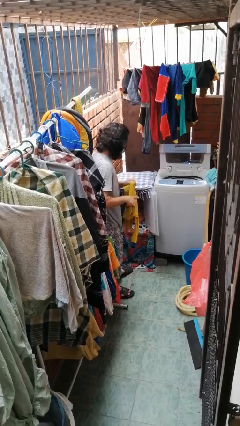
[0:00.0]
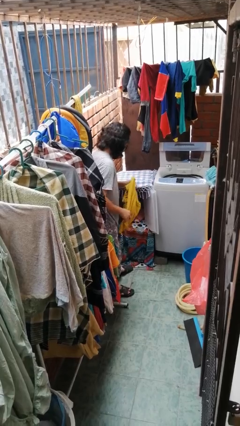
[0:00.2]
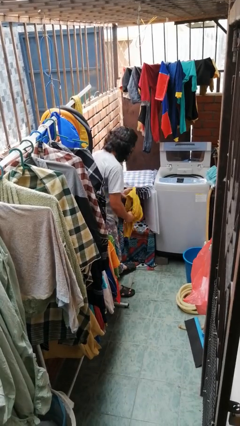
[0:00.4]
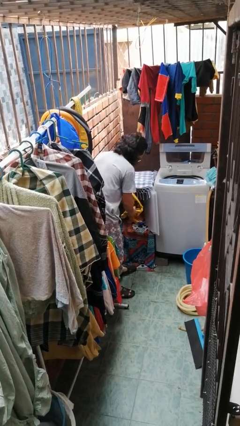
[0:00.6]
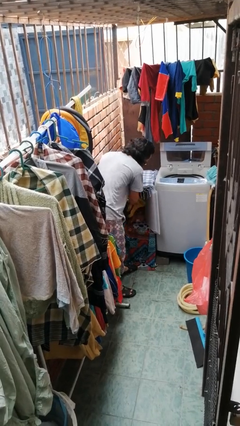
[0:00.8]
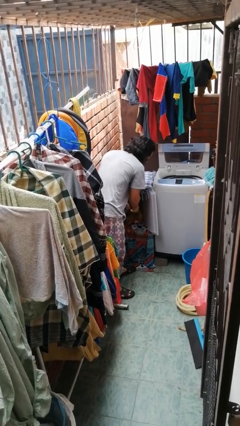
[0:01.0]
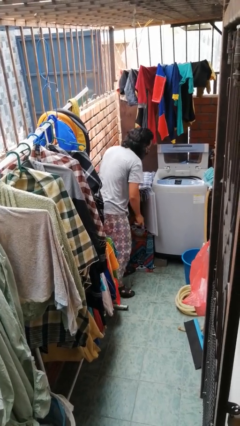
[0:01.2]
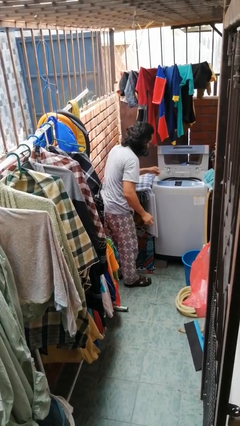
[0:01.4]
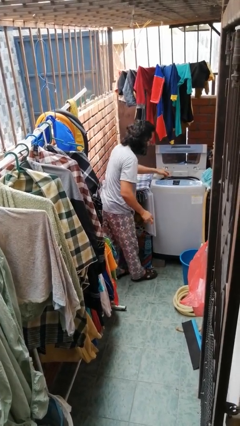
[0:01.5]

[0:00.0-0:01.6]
person loads dryer

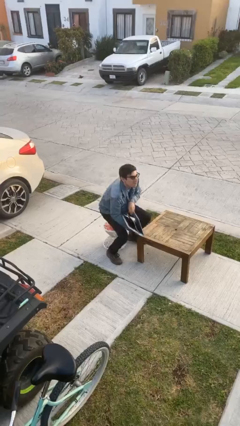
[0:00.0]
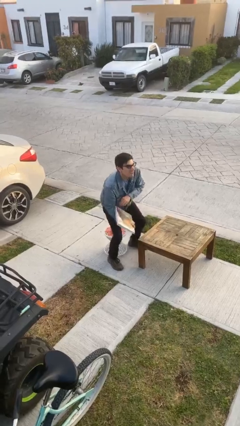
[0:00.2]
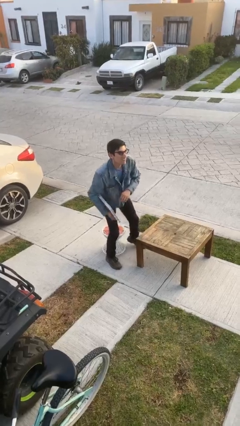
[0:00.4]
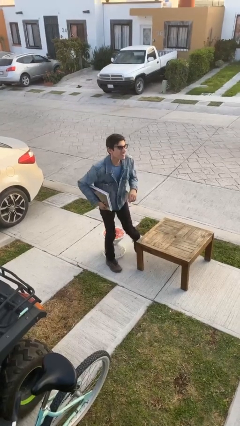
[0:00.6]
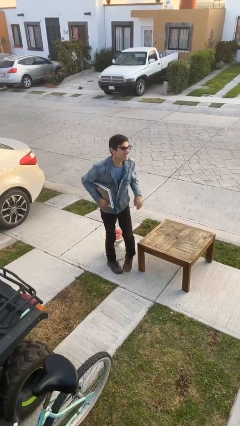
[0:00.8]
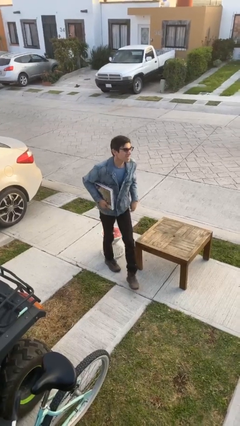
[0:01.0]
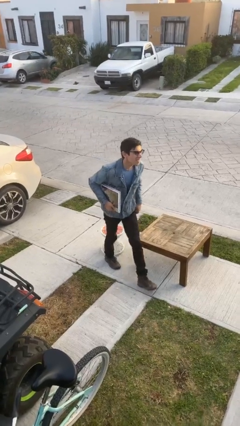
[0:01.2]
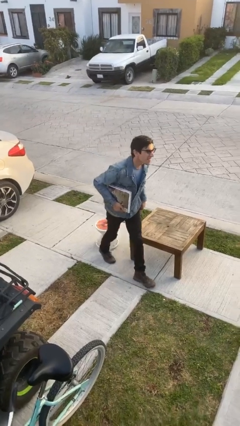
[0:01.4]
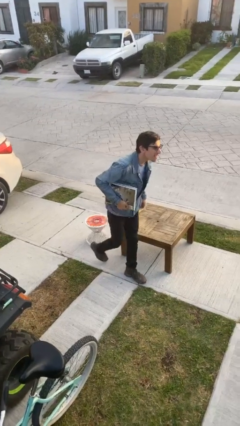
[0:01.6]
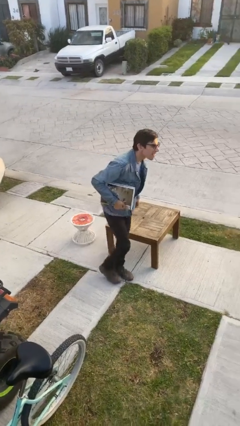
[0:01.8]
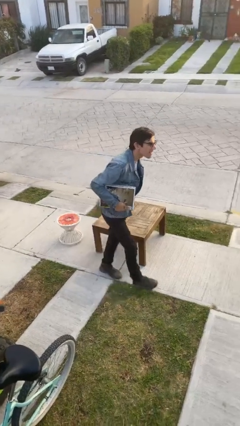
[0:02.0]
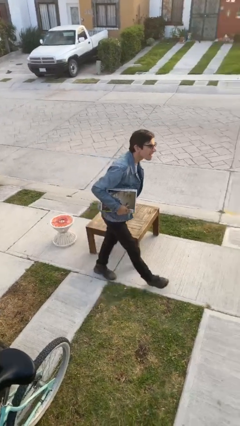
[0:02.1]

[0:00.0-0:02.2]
person stands up

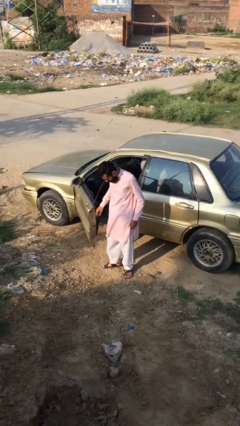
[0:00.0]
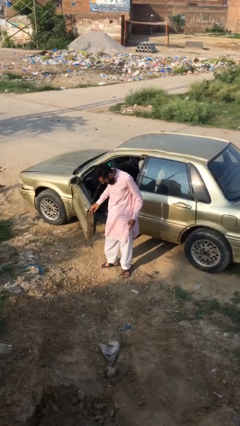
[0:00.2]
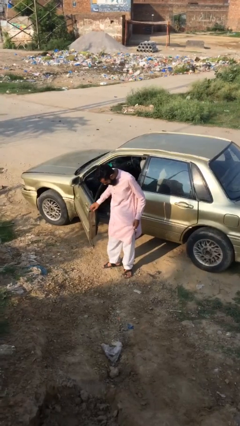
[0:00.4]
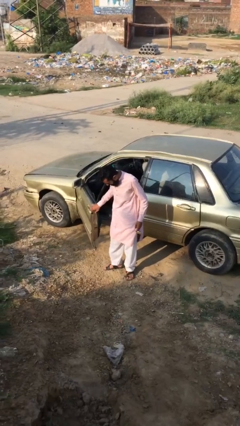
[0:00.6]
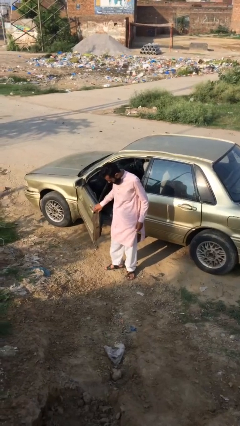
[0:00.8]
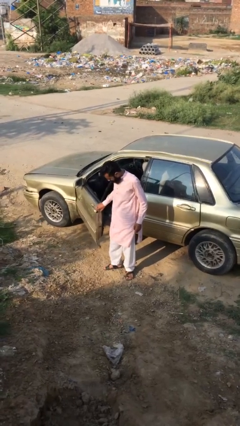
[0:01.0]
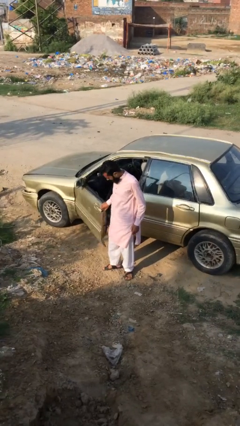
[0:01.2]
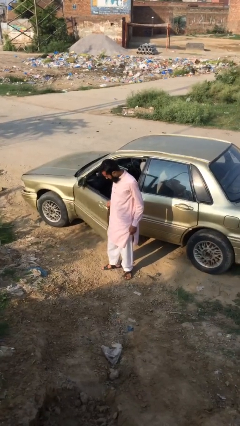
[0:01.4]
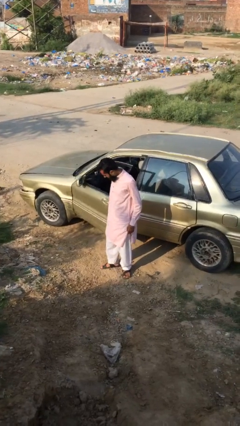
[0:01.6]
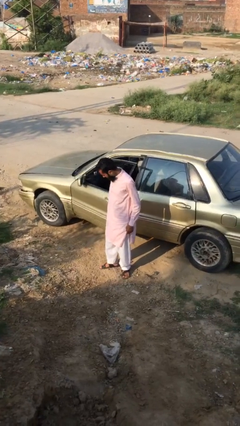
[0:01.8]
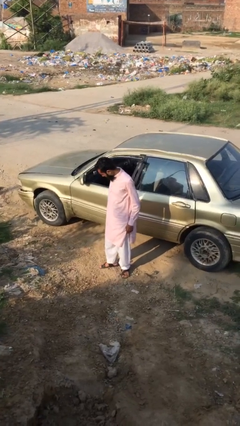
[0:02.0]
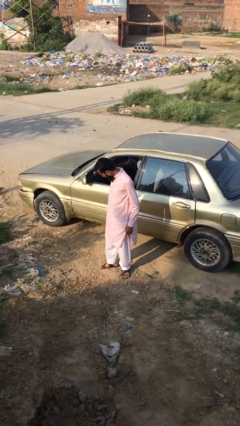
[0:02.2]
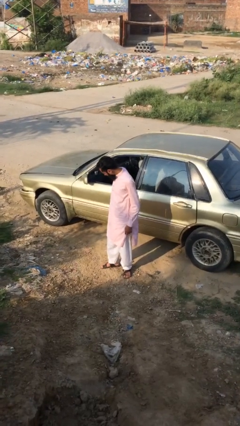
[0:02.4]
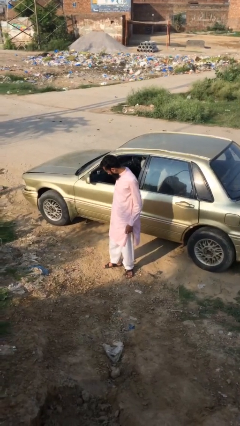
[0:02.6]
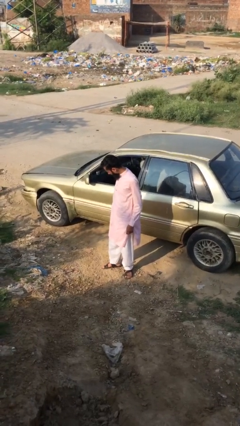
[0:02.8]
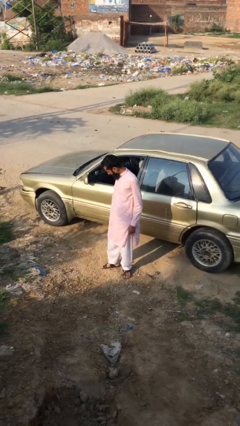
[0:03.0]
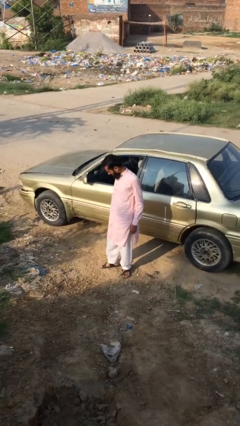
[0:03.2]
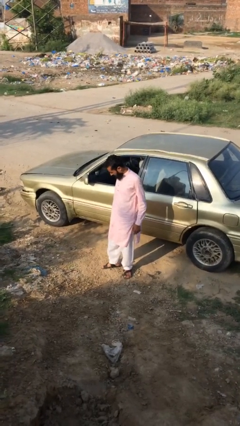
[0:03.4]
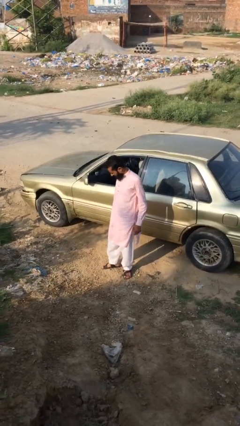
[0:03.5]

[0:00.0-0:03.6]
person closes car door

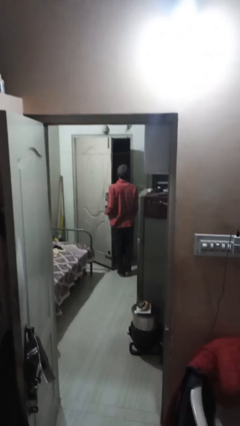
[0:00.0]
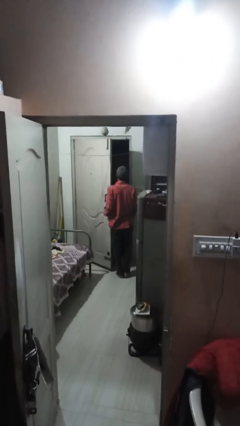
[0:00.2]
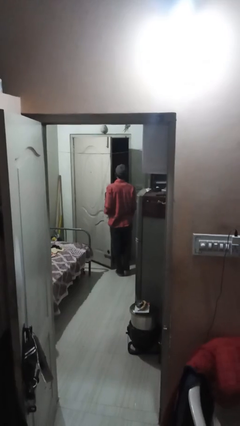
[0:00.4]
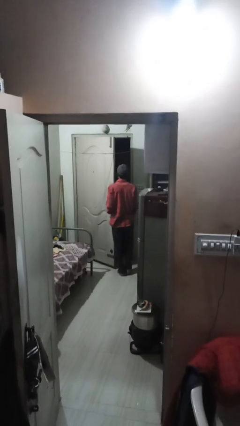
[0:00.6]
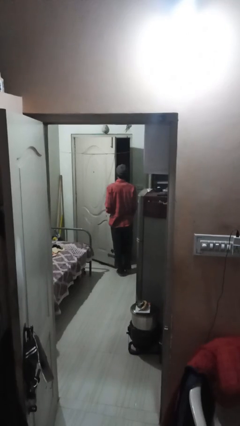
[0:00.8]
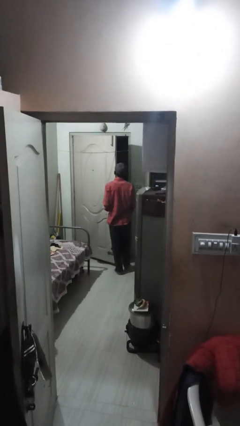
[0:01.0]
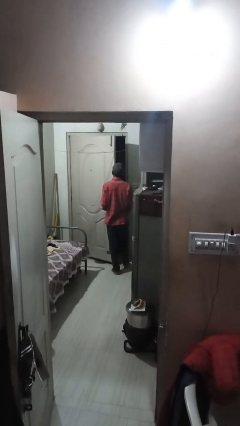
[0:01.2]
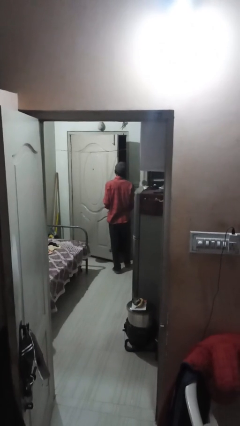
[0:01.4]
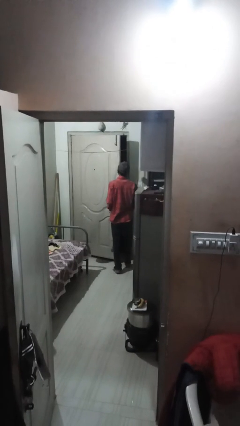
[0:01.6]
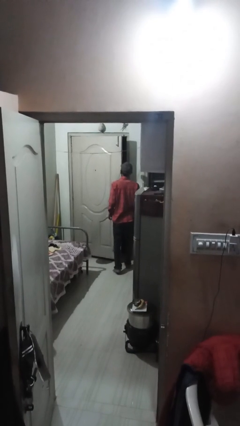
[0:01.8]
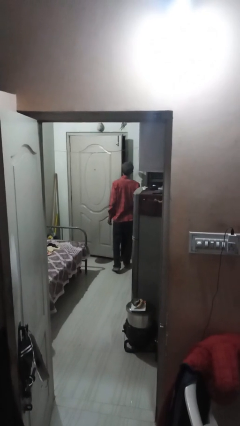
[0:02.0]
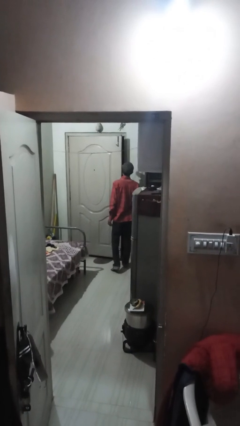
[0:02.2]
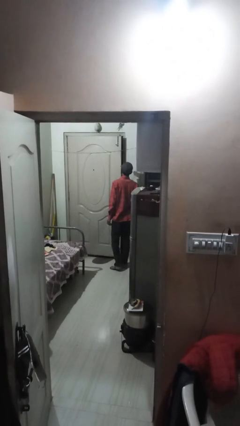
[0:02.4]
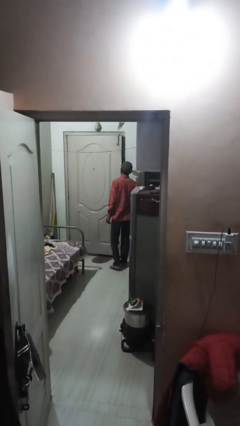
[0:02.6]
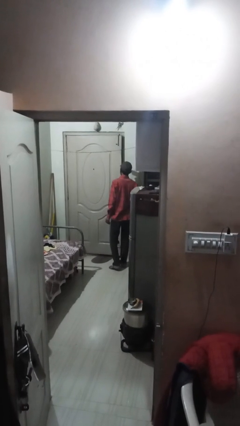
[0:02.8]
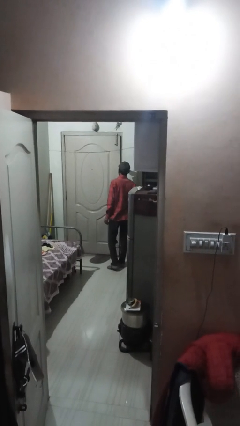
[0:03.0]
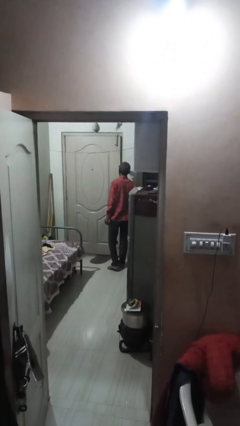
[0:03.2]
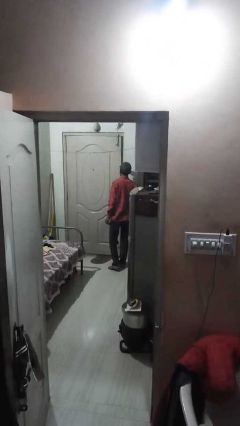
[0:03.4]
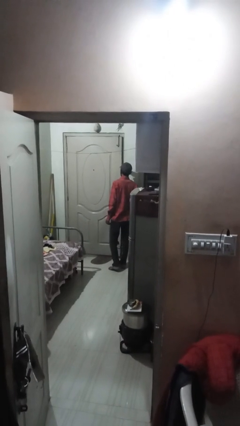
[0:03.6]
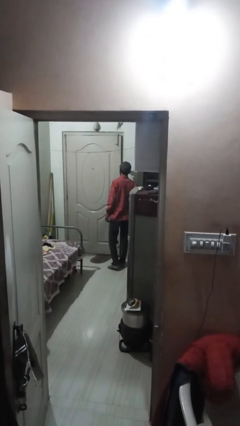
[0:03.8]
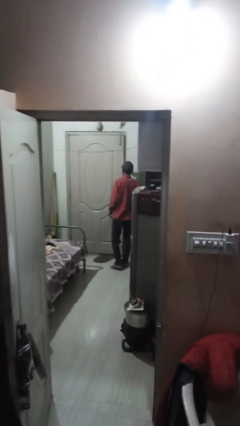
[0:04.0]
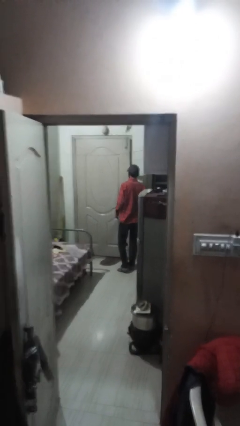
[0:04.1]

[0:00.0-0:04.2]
person closes facility door

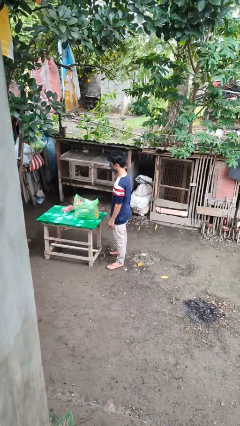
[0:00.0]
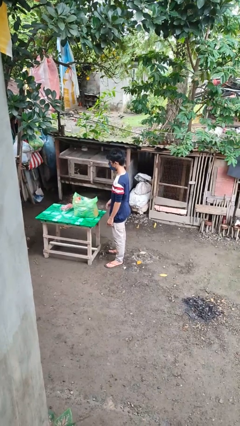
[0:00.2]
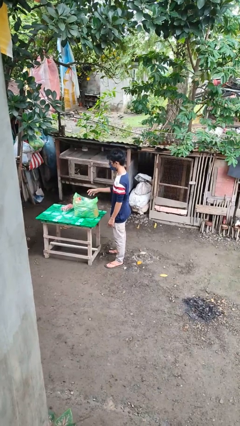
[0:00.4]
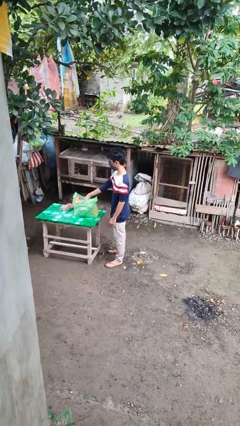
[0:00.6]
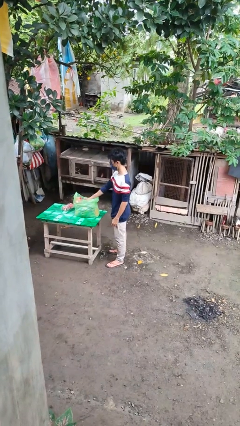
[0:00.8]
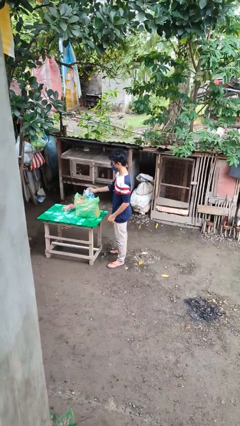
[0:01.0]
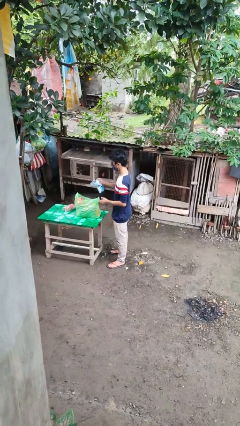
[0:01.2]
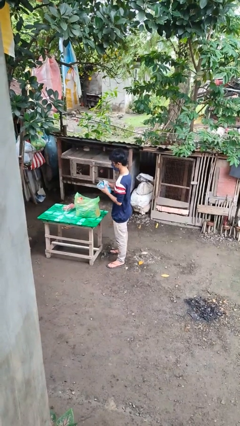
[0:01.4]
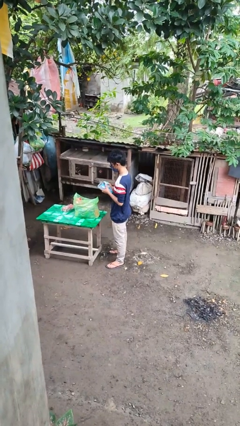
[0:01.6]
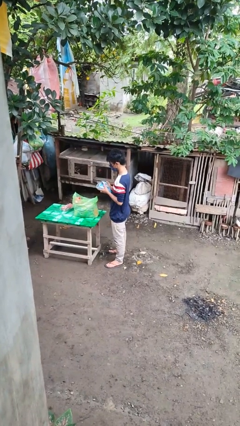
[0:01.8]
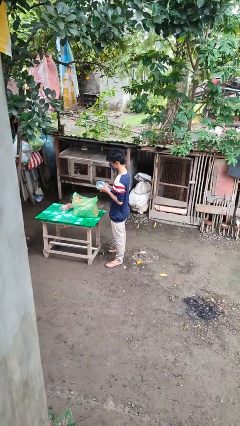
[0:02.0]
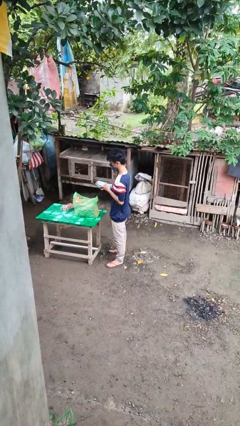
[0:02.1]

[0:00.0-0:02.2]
person takes object from bag

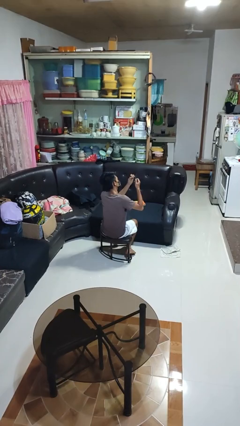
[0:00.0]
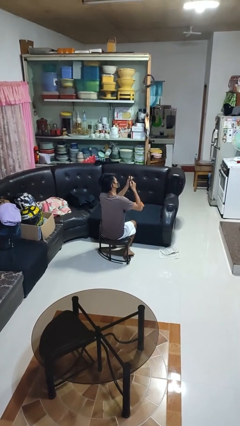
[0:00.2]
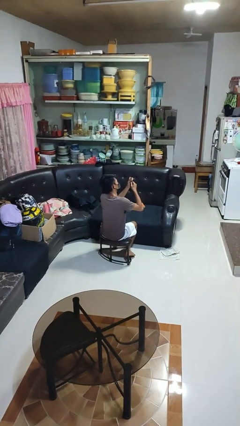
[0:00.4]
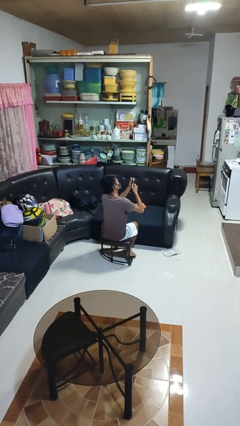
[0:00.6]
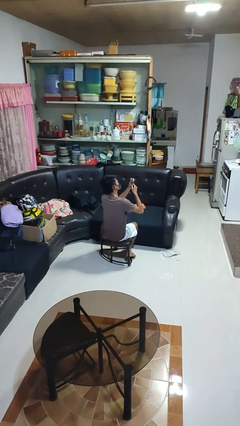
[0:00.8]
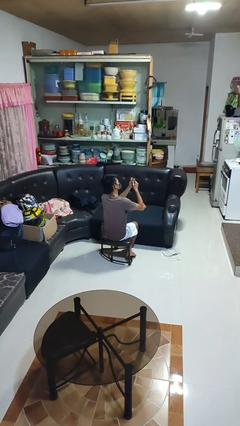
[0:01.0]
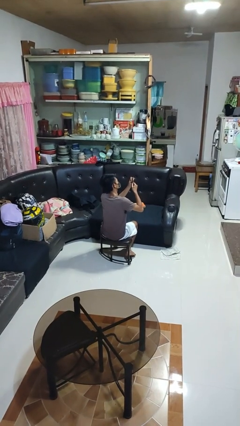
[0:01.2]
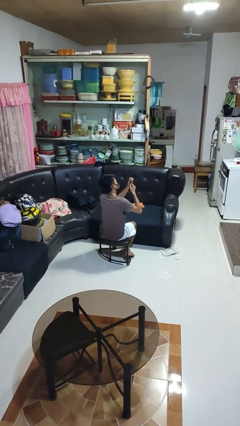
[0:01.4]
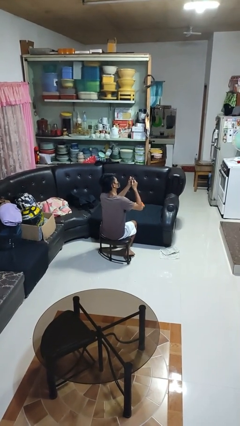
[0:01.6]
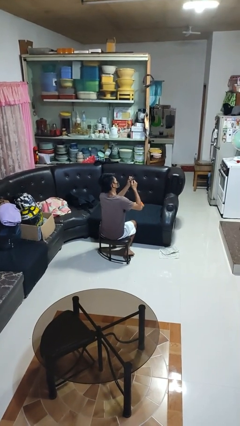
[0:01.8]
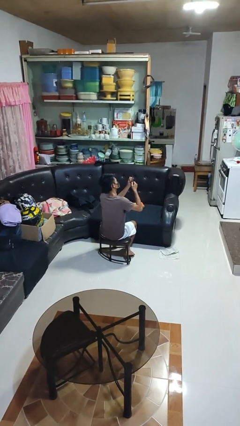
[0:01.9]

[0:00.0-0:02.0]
person files fingernails

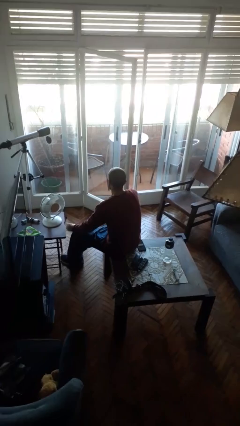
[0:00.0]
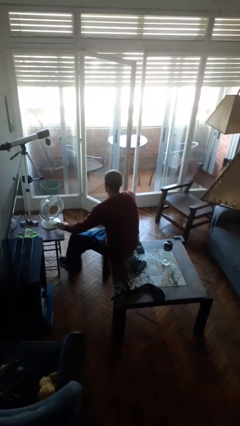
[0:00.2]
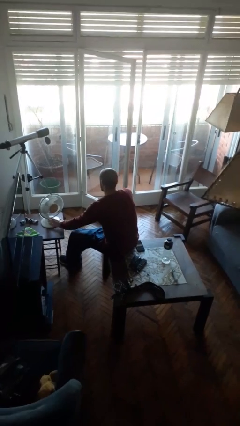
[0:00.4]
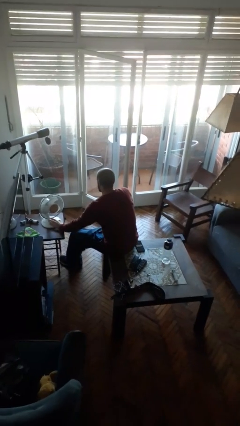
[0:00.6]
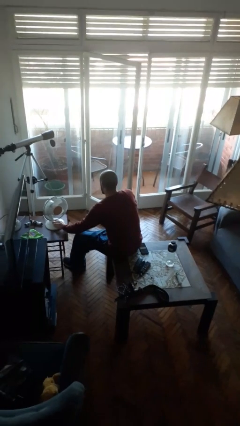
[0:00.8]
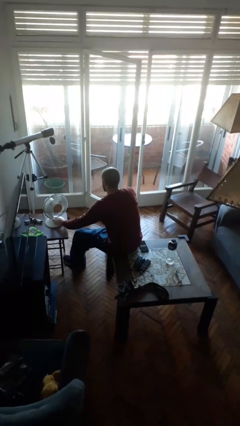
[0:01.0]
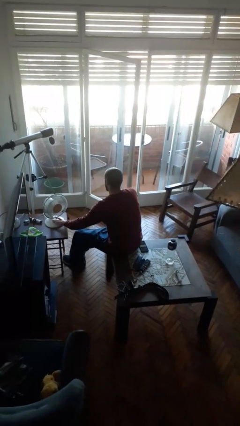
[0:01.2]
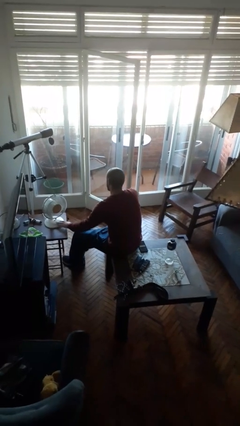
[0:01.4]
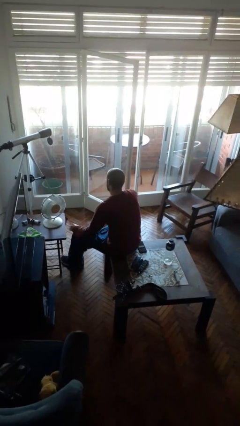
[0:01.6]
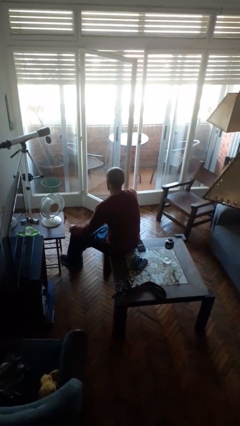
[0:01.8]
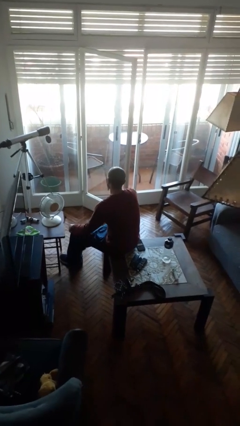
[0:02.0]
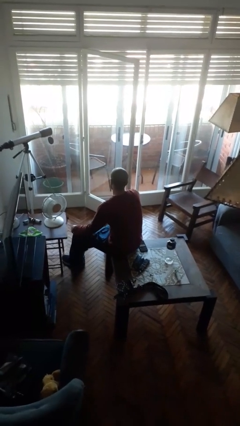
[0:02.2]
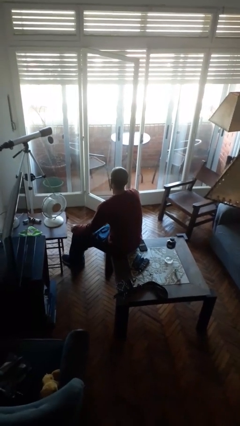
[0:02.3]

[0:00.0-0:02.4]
person turns on fan
